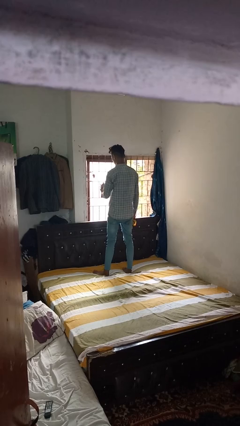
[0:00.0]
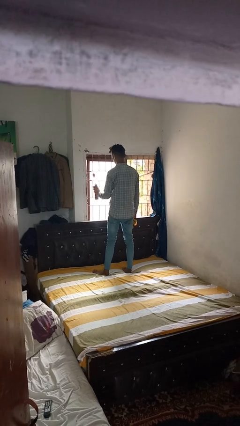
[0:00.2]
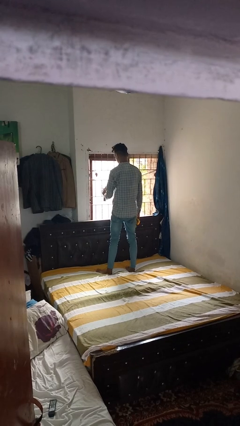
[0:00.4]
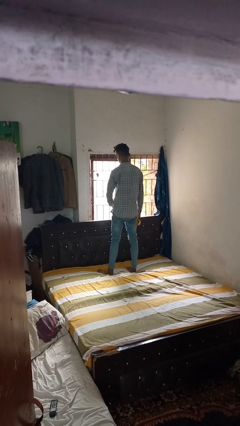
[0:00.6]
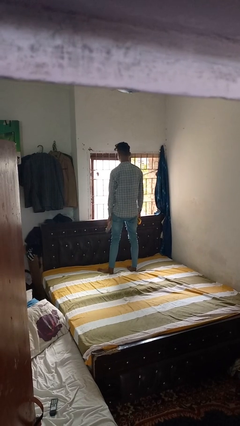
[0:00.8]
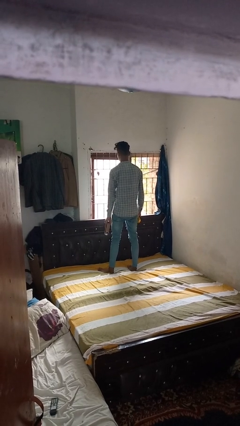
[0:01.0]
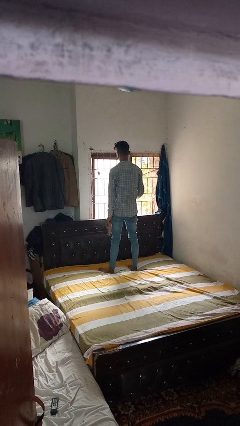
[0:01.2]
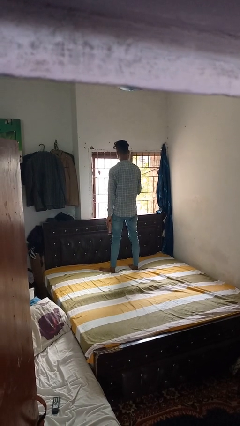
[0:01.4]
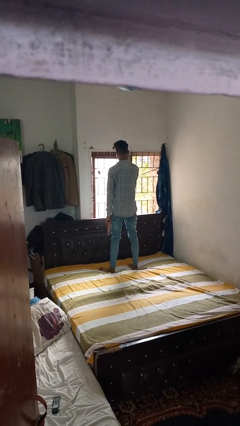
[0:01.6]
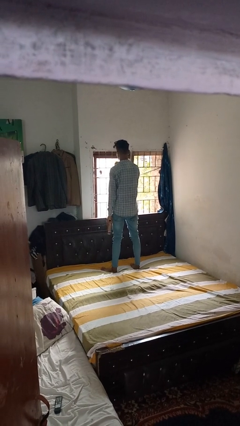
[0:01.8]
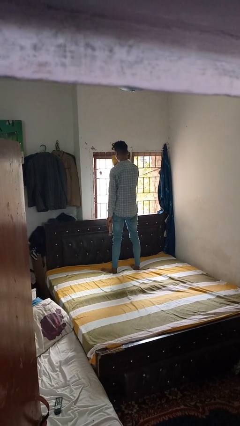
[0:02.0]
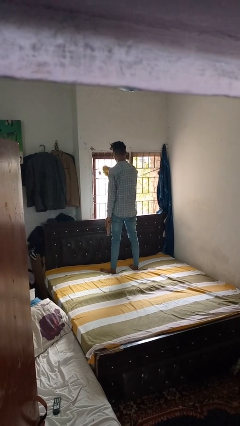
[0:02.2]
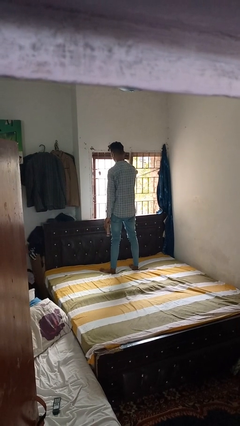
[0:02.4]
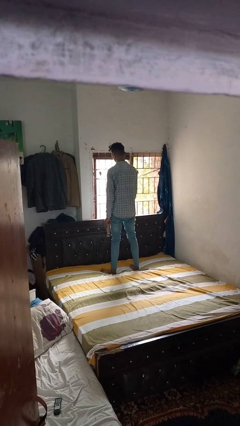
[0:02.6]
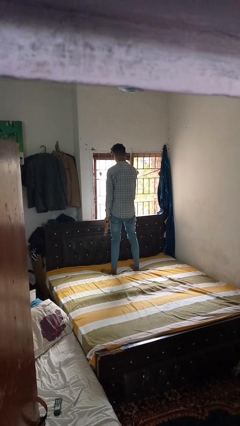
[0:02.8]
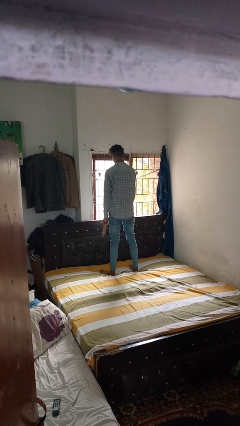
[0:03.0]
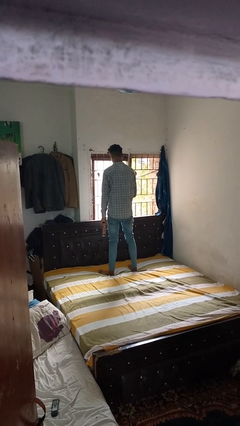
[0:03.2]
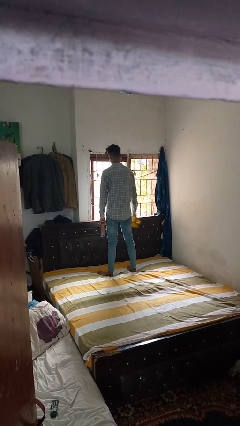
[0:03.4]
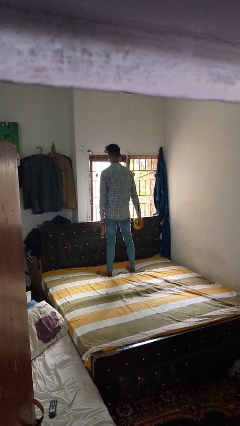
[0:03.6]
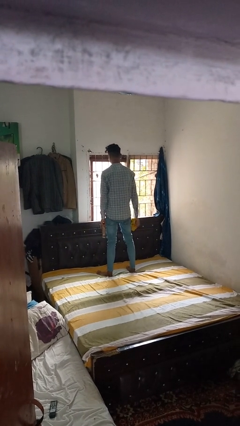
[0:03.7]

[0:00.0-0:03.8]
person washes window

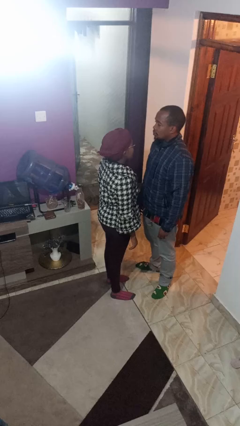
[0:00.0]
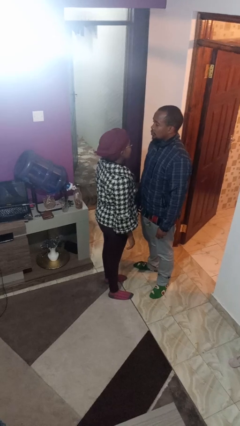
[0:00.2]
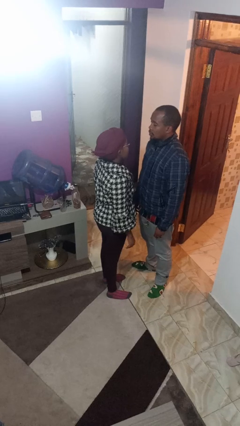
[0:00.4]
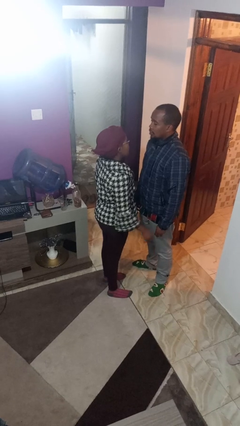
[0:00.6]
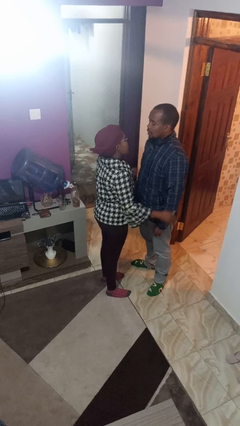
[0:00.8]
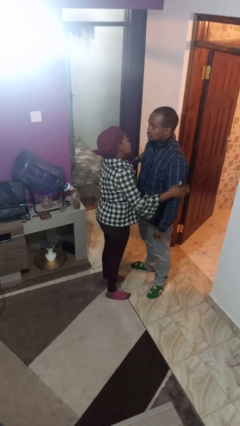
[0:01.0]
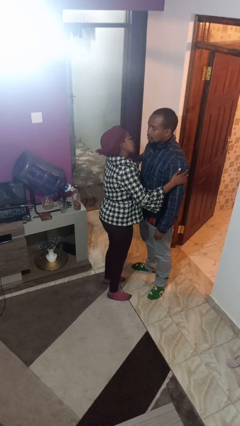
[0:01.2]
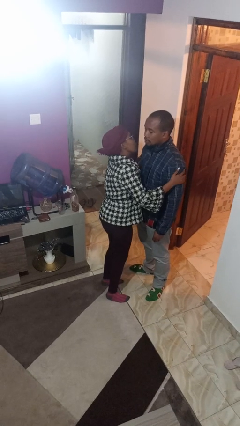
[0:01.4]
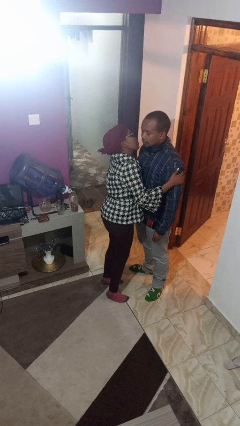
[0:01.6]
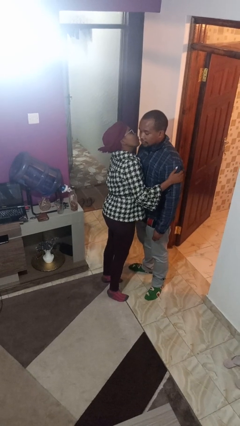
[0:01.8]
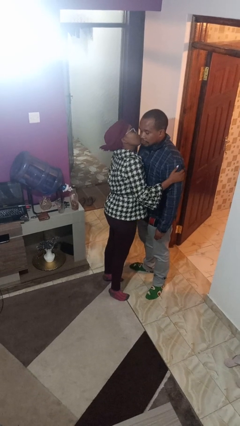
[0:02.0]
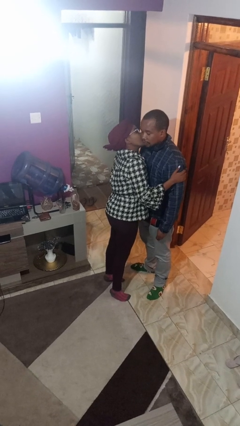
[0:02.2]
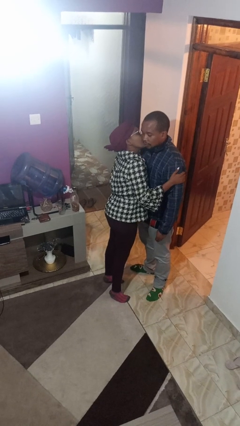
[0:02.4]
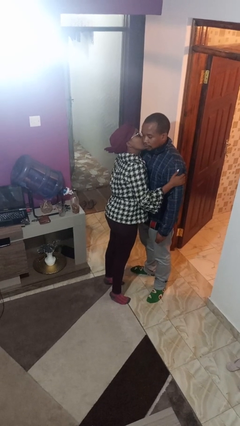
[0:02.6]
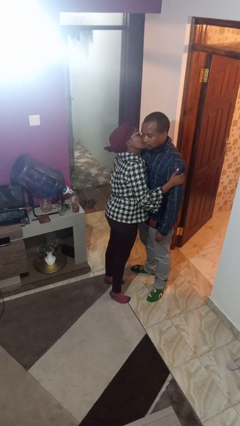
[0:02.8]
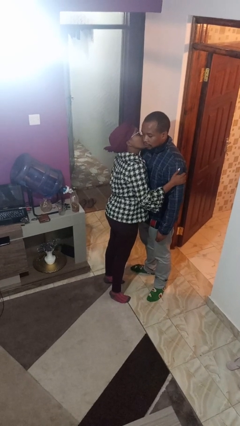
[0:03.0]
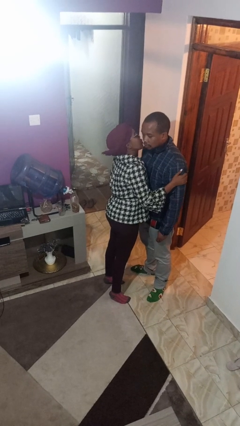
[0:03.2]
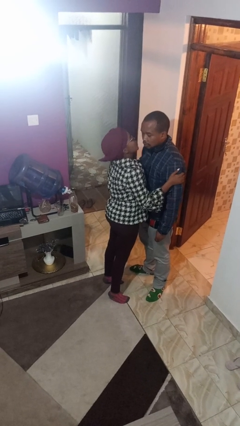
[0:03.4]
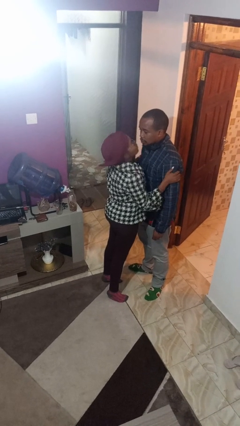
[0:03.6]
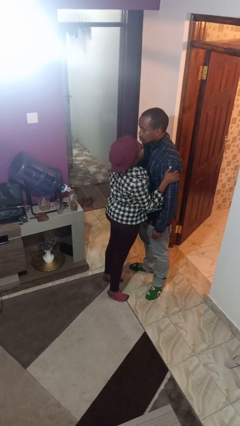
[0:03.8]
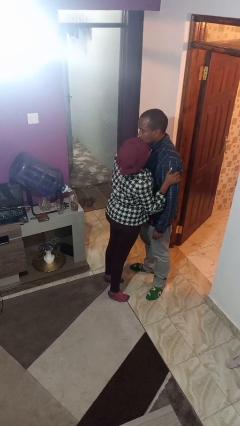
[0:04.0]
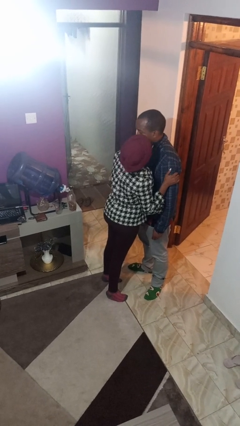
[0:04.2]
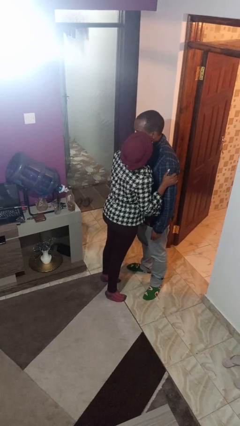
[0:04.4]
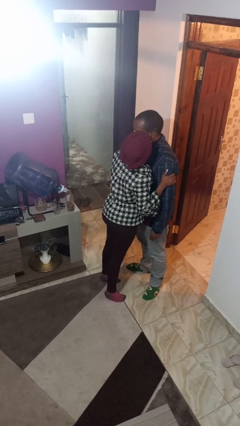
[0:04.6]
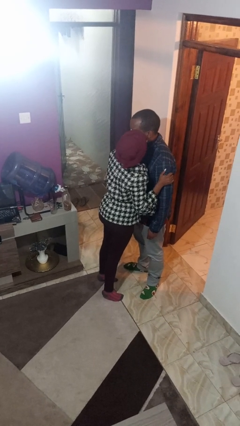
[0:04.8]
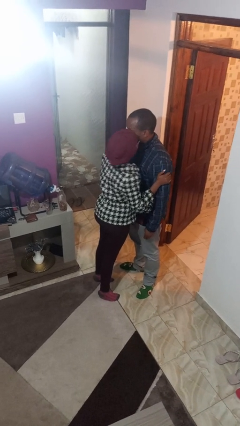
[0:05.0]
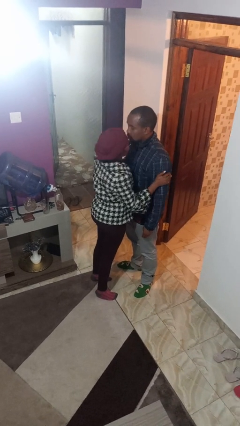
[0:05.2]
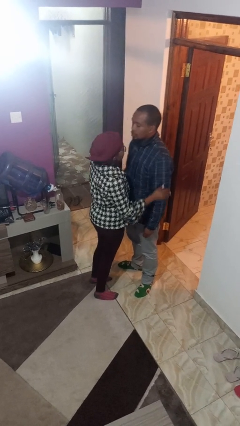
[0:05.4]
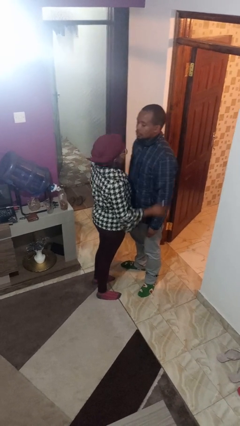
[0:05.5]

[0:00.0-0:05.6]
person kisses cheek of person

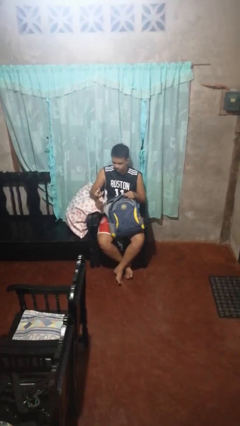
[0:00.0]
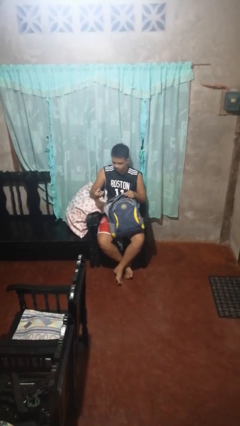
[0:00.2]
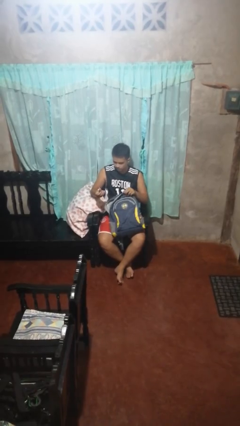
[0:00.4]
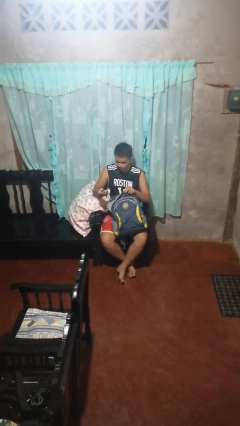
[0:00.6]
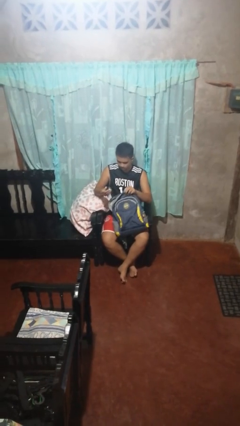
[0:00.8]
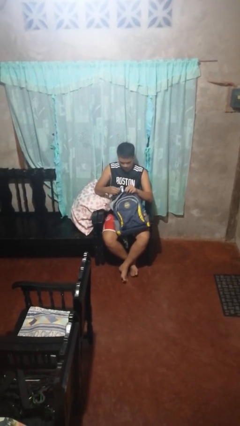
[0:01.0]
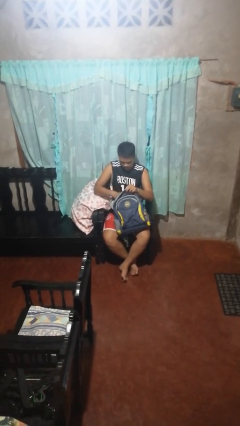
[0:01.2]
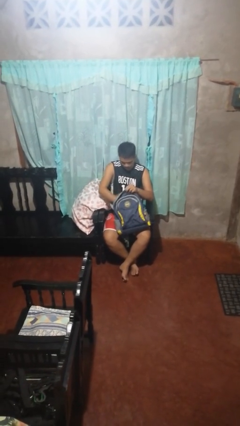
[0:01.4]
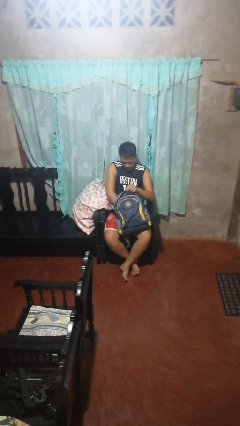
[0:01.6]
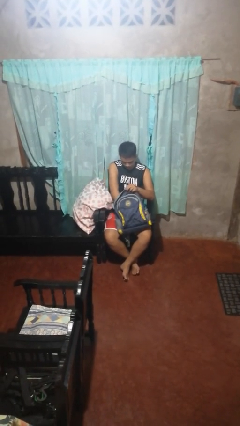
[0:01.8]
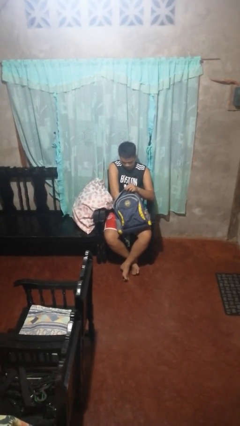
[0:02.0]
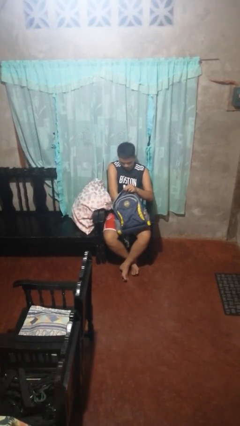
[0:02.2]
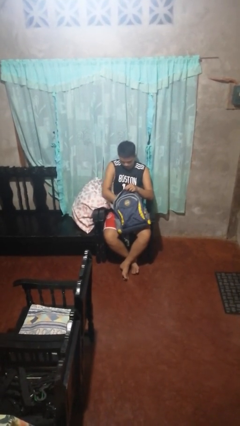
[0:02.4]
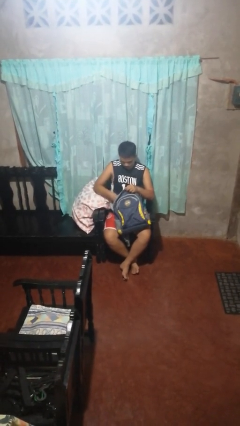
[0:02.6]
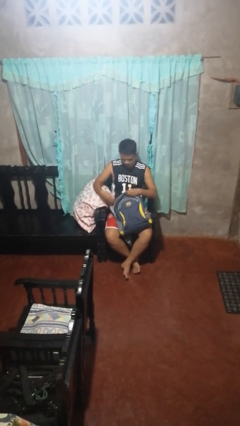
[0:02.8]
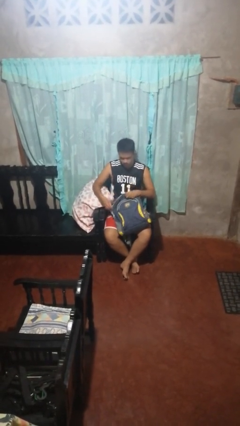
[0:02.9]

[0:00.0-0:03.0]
person puts object into backpack

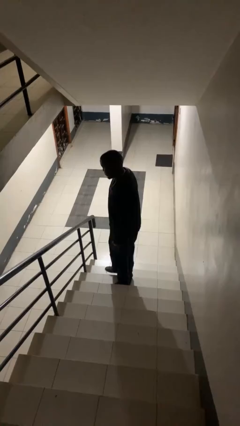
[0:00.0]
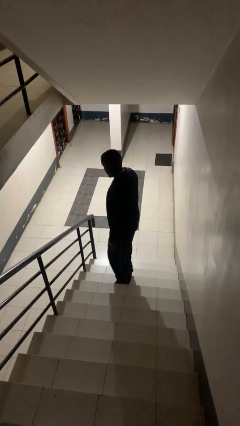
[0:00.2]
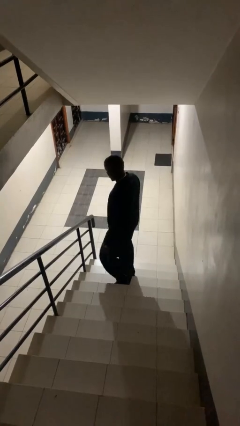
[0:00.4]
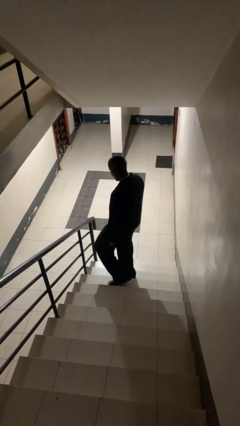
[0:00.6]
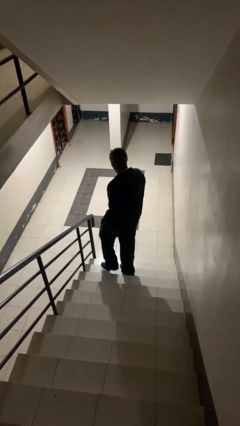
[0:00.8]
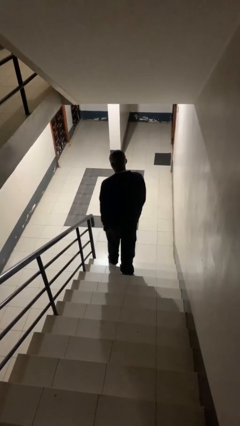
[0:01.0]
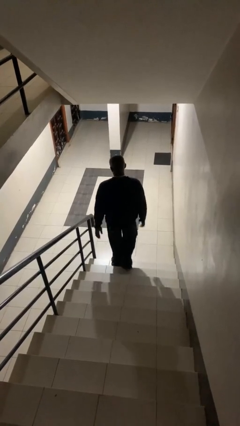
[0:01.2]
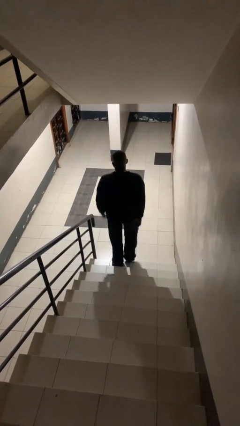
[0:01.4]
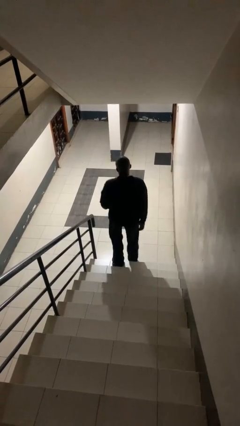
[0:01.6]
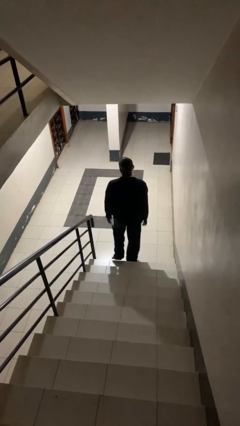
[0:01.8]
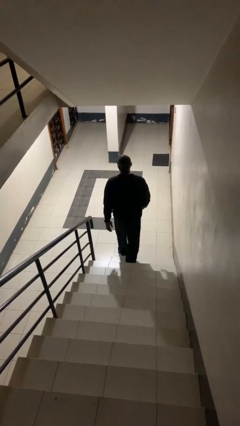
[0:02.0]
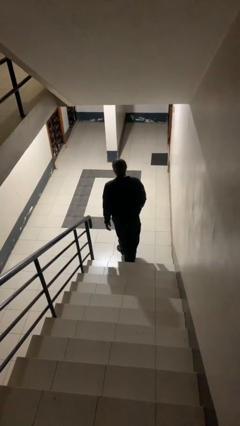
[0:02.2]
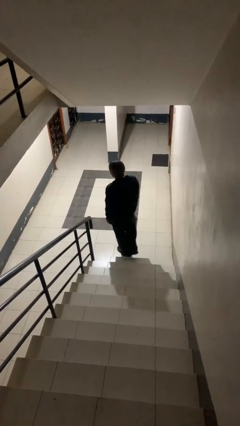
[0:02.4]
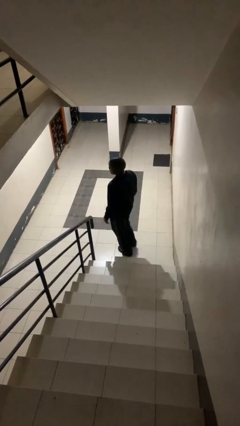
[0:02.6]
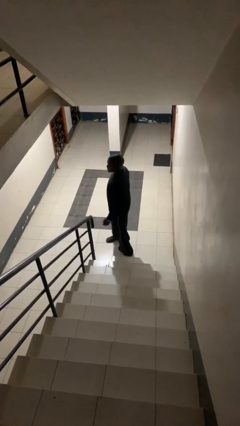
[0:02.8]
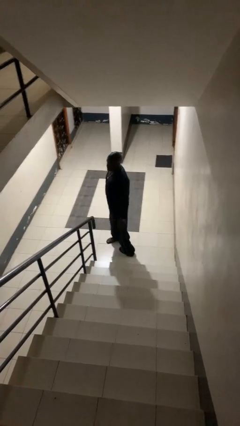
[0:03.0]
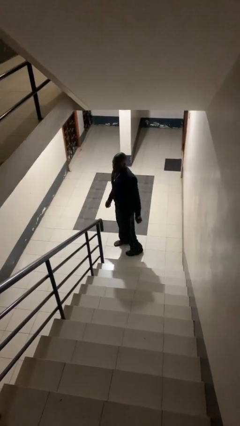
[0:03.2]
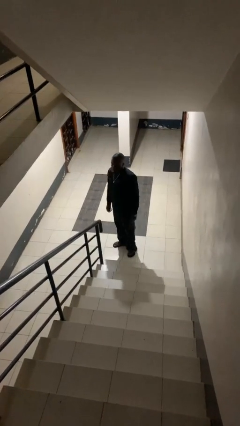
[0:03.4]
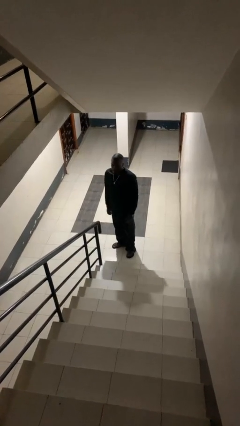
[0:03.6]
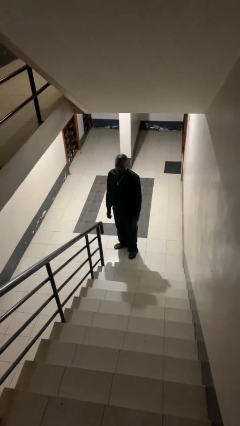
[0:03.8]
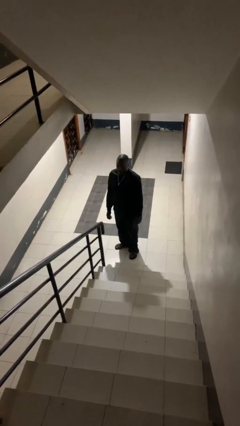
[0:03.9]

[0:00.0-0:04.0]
person climbs down stairs

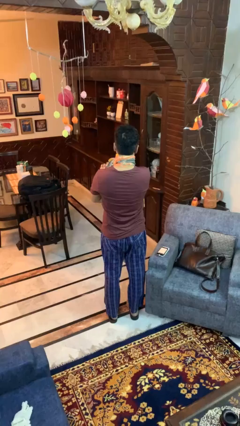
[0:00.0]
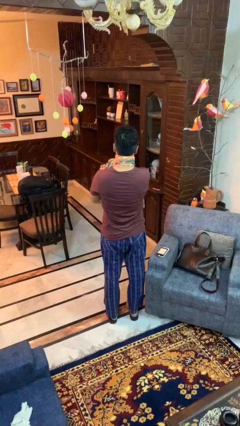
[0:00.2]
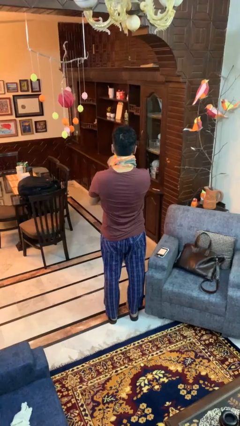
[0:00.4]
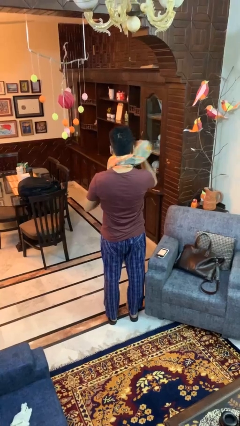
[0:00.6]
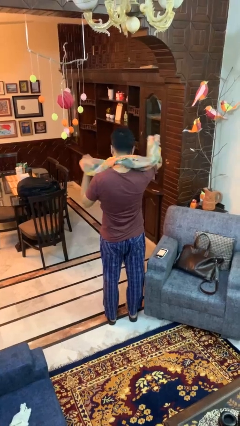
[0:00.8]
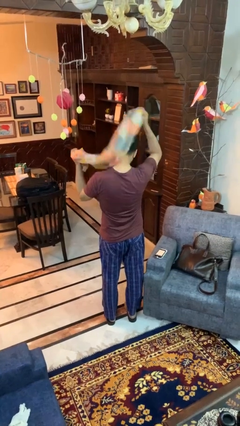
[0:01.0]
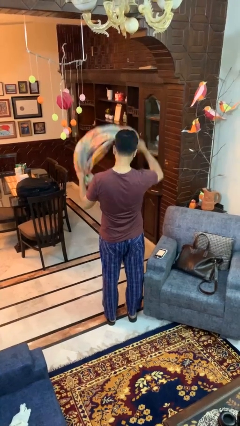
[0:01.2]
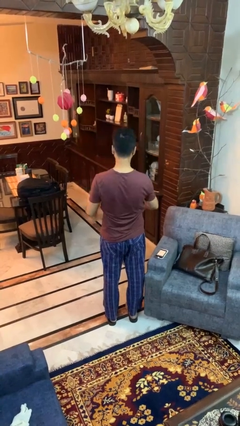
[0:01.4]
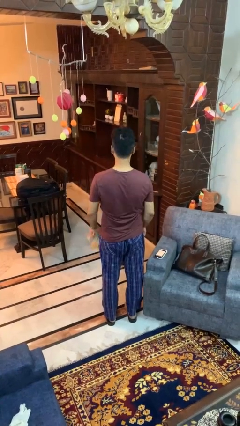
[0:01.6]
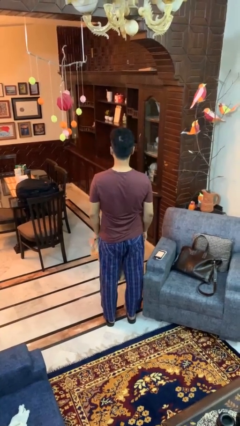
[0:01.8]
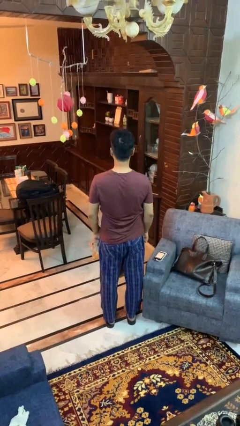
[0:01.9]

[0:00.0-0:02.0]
person takes off scarf
